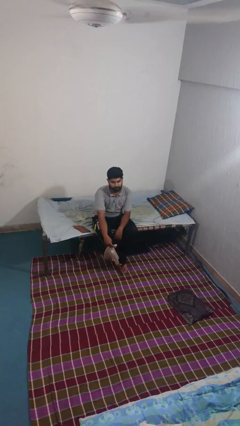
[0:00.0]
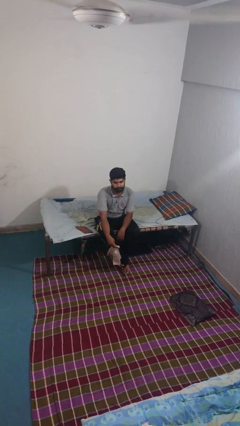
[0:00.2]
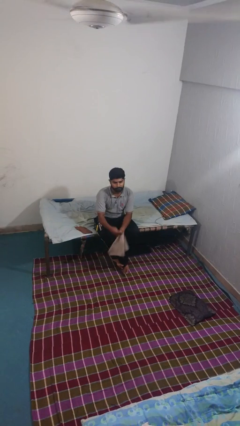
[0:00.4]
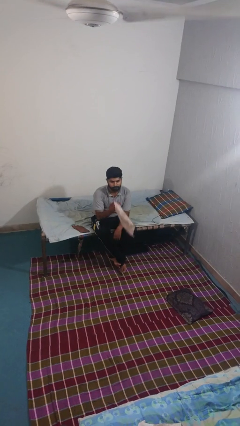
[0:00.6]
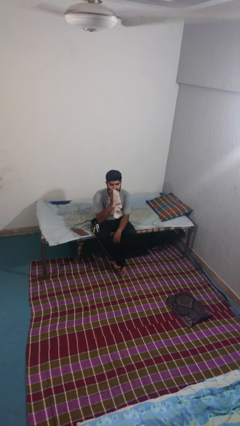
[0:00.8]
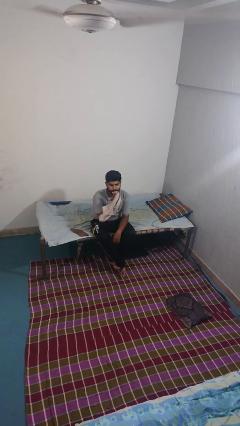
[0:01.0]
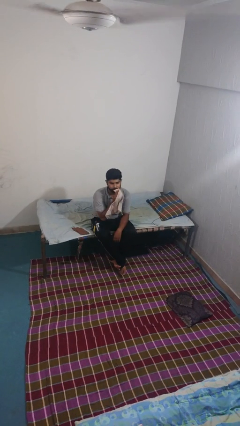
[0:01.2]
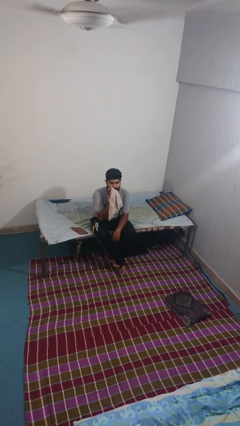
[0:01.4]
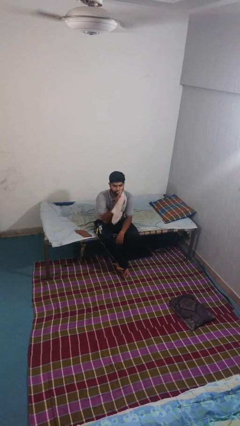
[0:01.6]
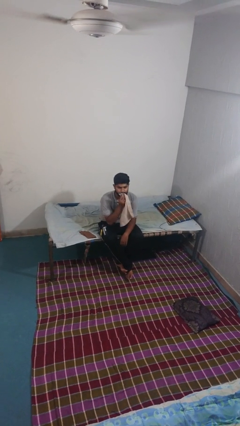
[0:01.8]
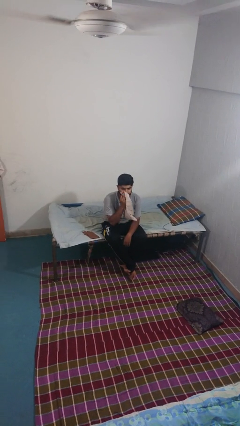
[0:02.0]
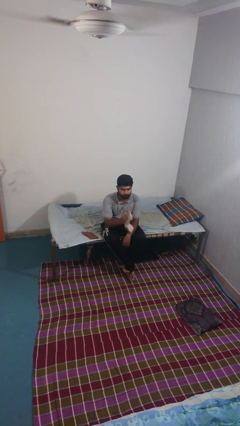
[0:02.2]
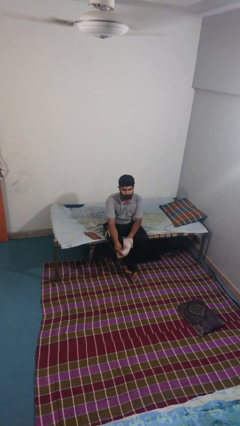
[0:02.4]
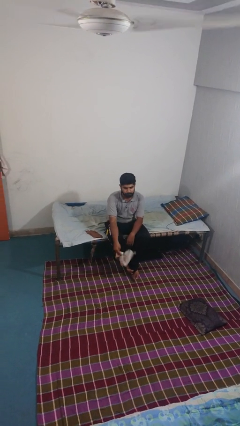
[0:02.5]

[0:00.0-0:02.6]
person wipes mouth with napkin

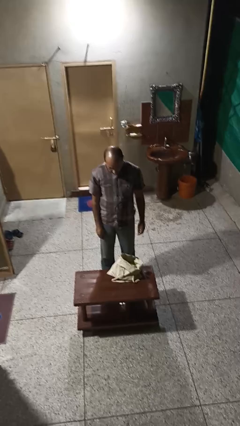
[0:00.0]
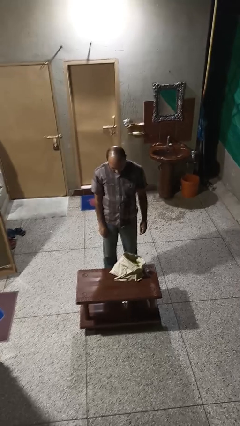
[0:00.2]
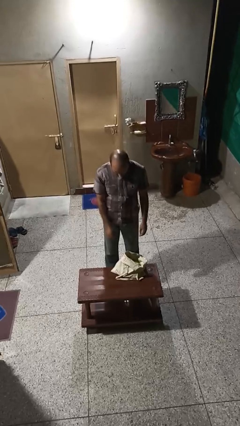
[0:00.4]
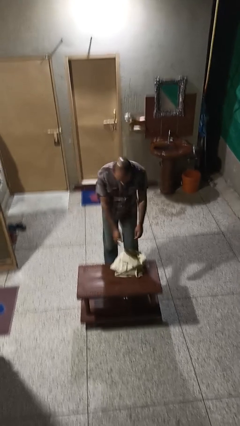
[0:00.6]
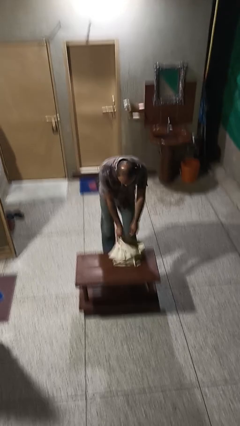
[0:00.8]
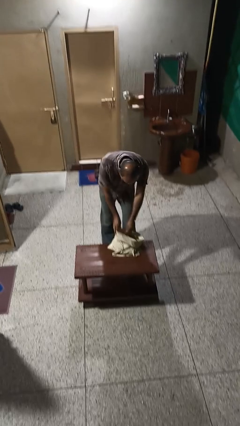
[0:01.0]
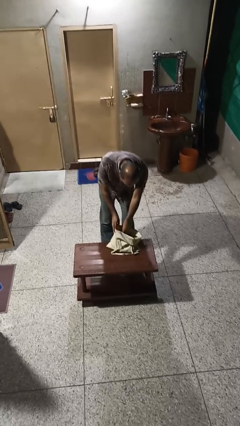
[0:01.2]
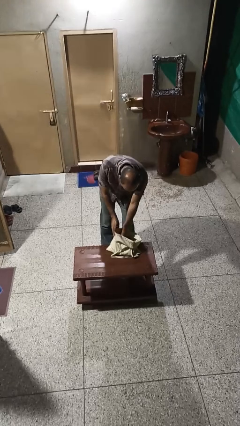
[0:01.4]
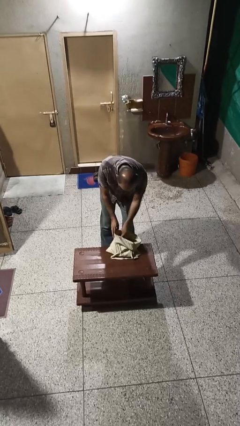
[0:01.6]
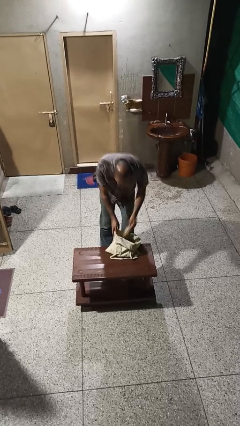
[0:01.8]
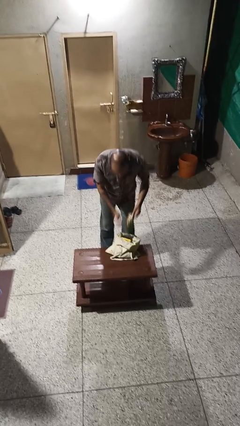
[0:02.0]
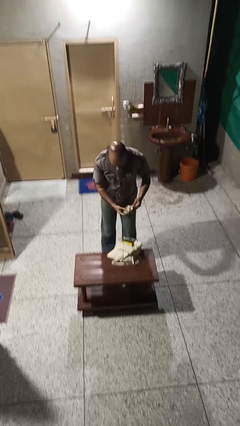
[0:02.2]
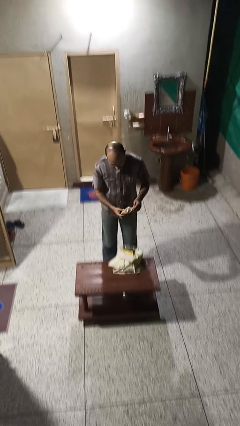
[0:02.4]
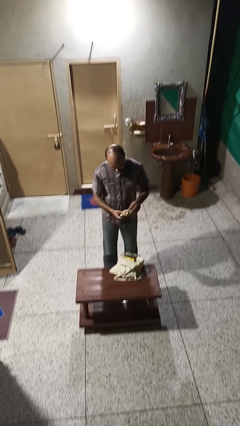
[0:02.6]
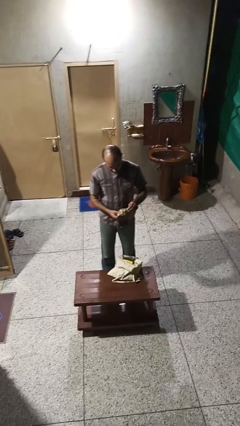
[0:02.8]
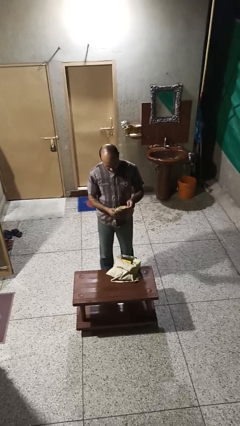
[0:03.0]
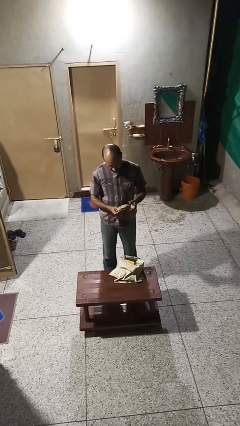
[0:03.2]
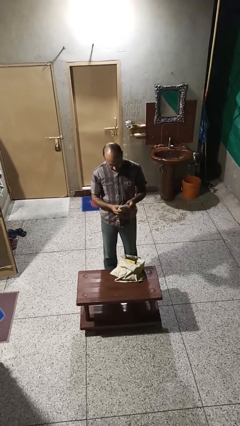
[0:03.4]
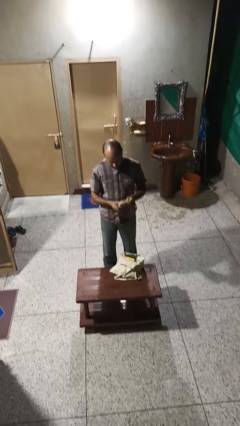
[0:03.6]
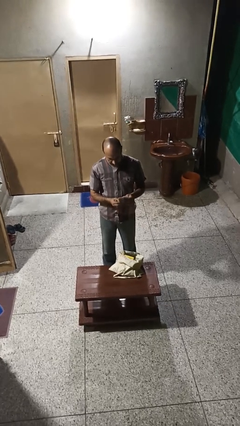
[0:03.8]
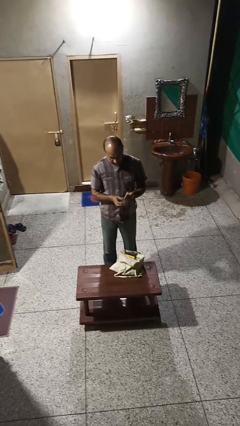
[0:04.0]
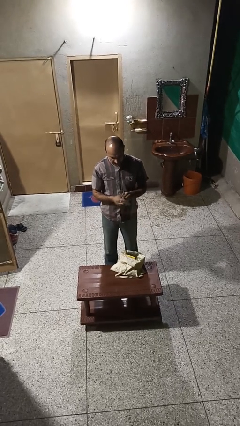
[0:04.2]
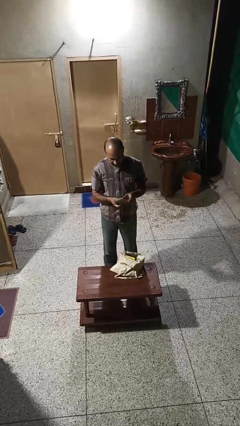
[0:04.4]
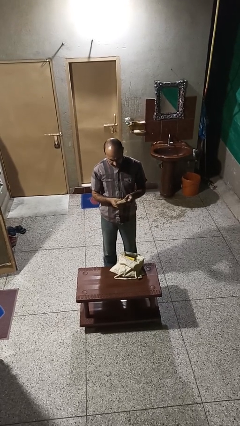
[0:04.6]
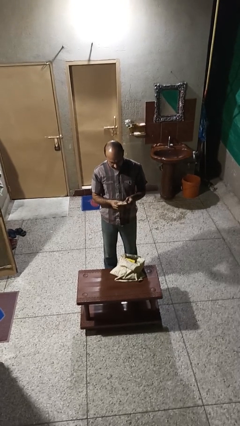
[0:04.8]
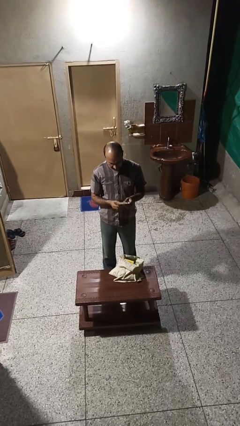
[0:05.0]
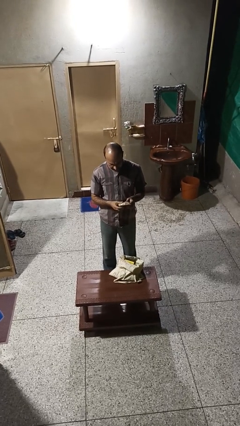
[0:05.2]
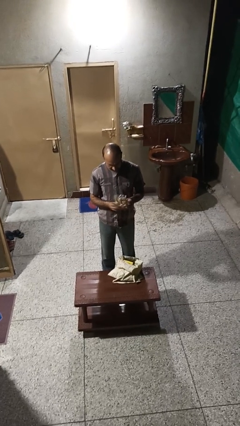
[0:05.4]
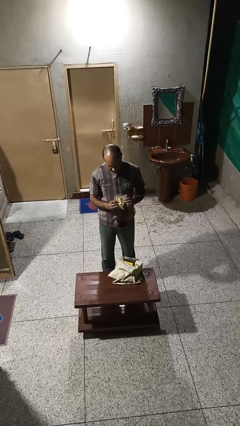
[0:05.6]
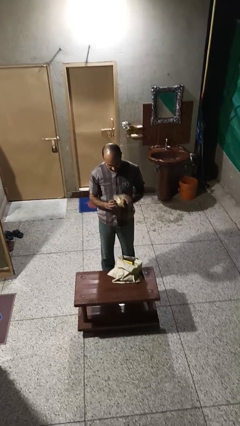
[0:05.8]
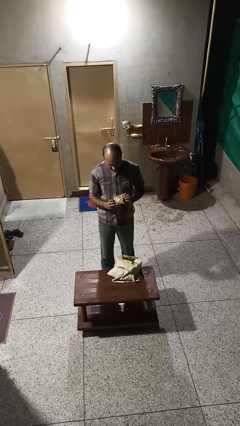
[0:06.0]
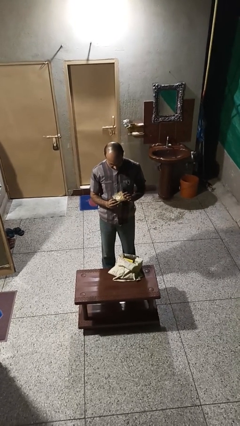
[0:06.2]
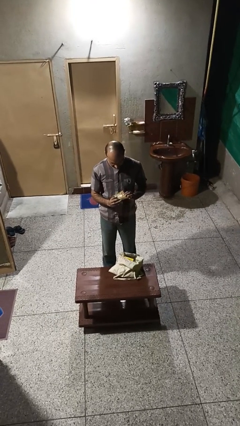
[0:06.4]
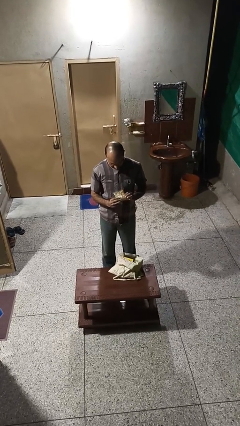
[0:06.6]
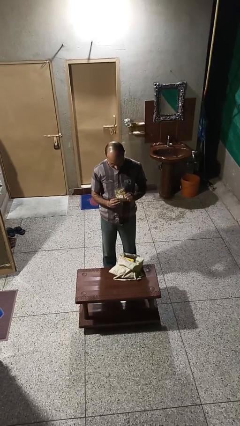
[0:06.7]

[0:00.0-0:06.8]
person takes object from bag

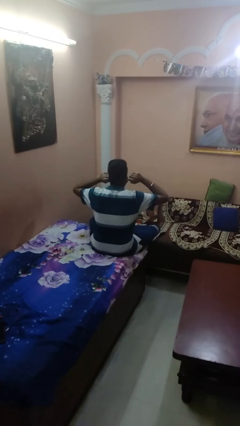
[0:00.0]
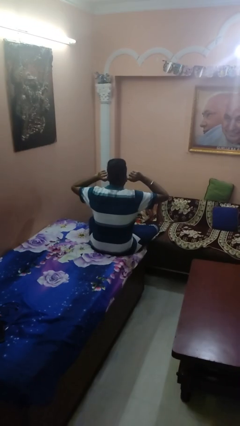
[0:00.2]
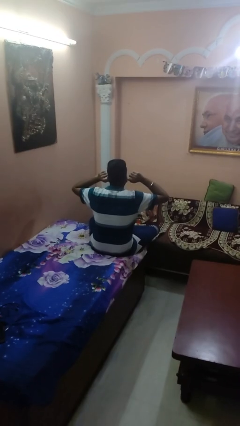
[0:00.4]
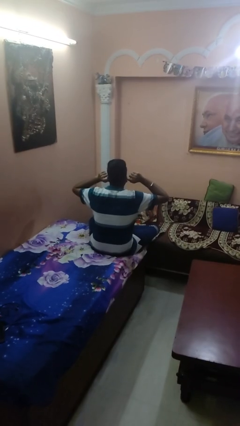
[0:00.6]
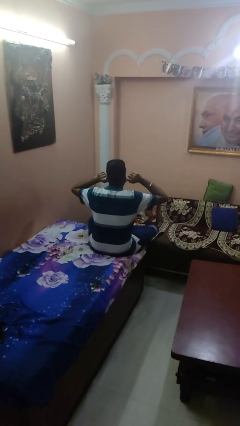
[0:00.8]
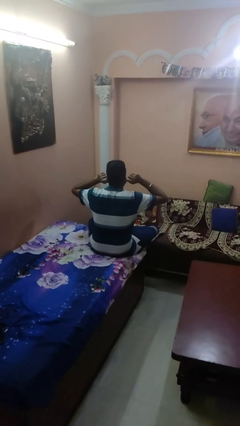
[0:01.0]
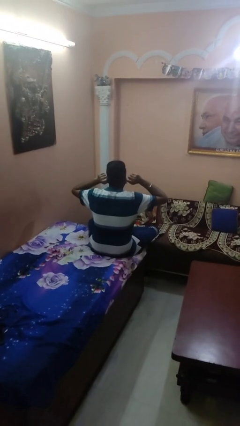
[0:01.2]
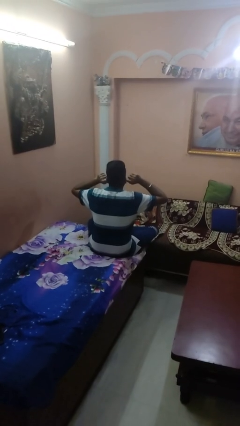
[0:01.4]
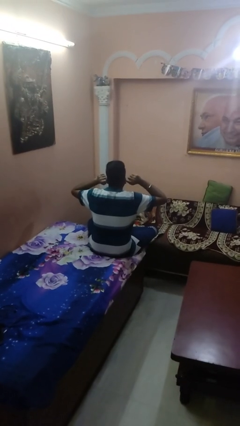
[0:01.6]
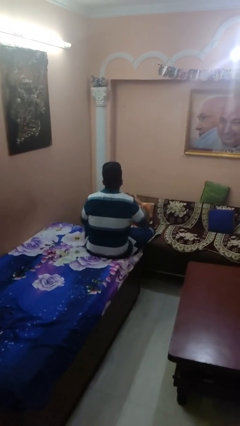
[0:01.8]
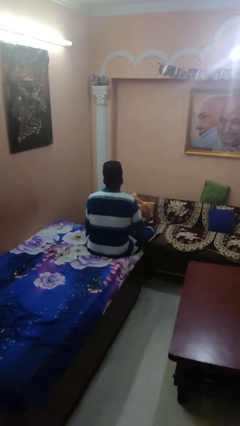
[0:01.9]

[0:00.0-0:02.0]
person puts fingers in ear

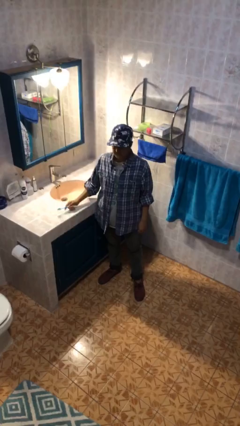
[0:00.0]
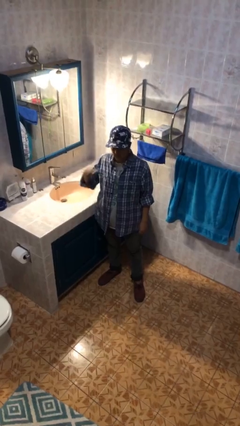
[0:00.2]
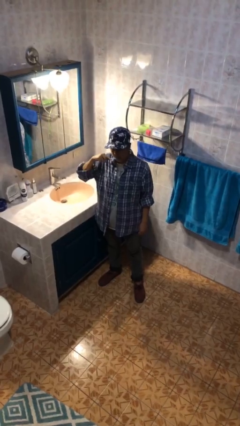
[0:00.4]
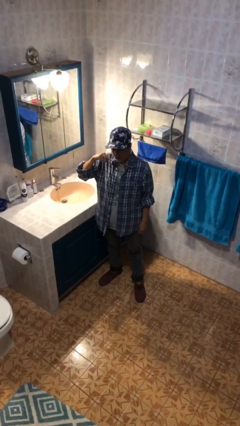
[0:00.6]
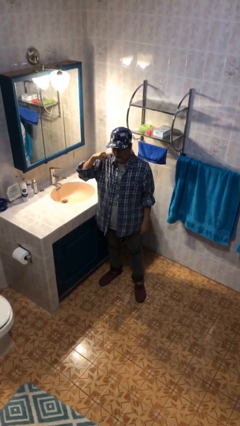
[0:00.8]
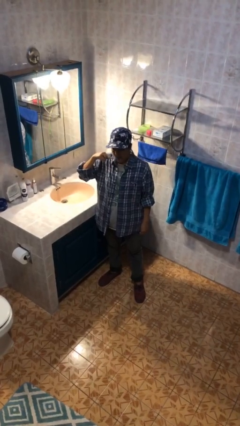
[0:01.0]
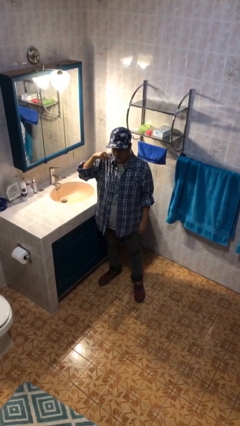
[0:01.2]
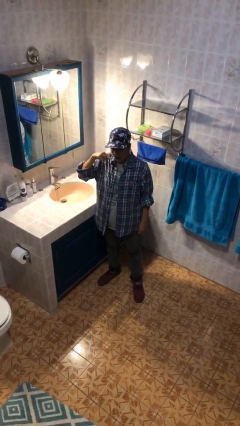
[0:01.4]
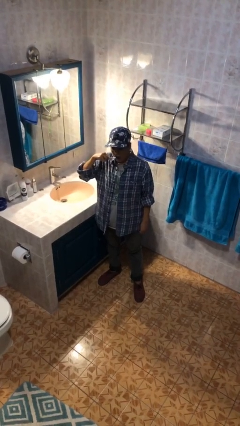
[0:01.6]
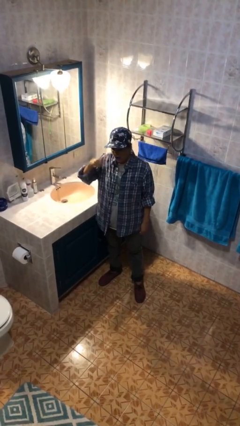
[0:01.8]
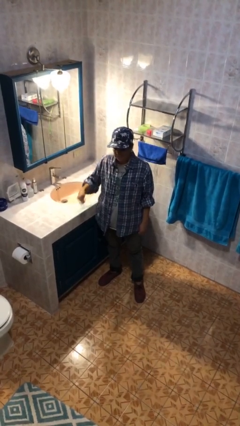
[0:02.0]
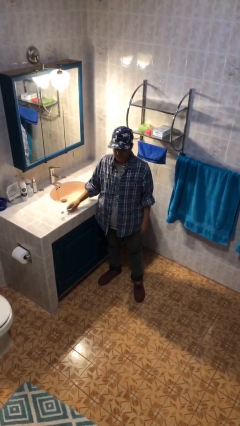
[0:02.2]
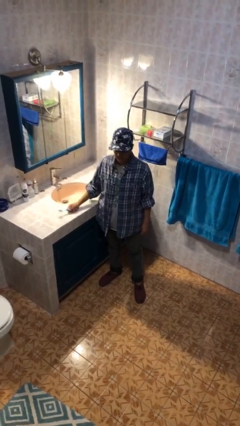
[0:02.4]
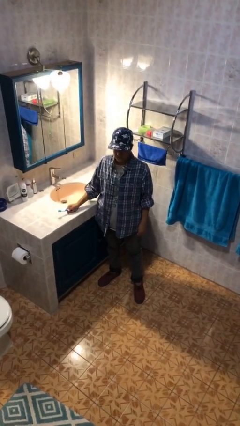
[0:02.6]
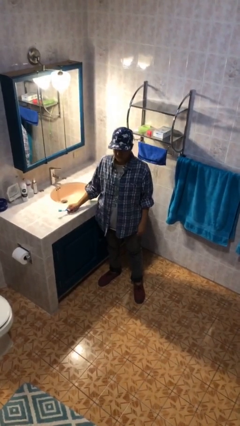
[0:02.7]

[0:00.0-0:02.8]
person brushes teeth

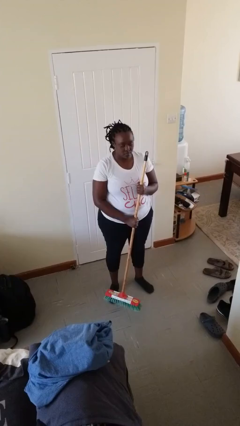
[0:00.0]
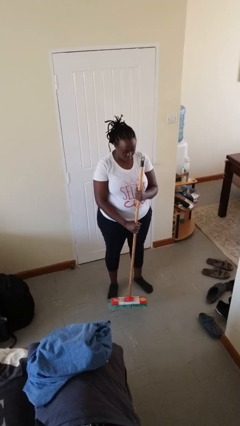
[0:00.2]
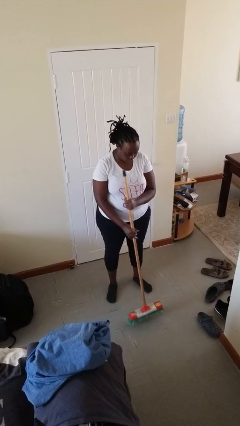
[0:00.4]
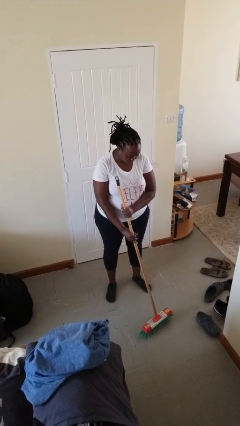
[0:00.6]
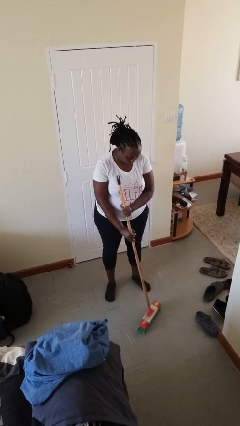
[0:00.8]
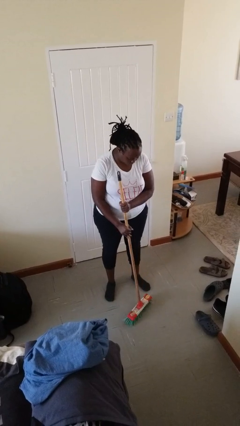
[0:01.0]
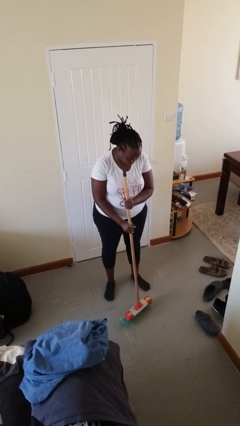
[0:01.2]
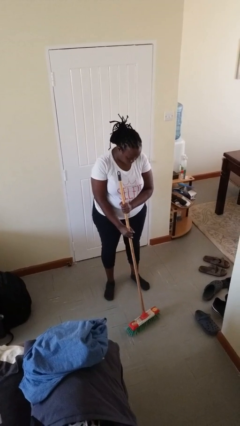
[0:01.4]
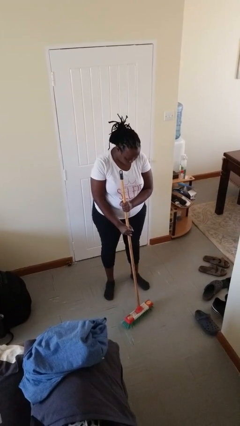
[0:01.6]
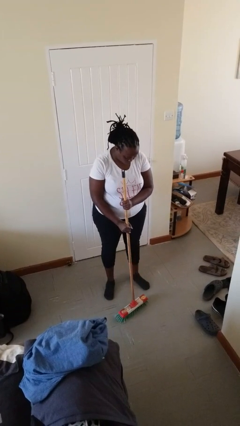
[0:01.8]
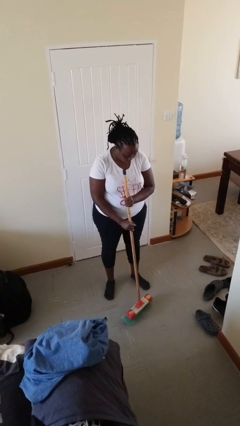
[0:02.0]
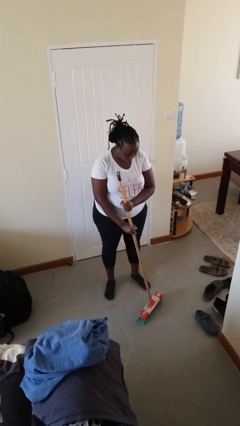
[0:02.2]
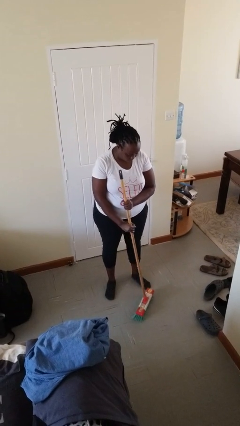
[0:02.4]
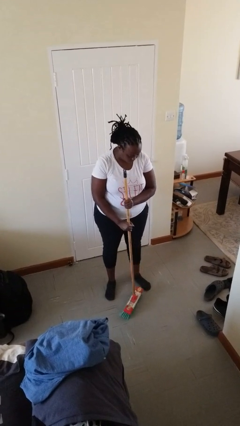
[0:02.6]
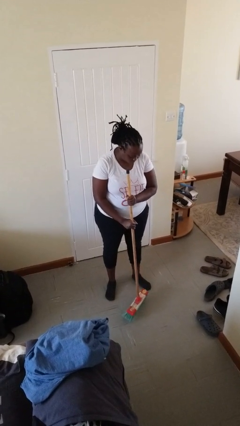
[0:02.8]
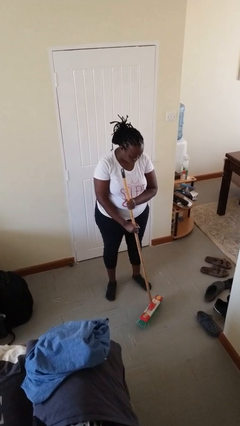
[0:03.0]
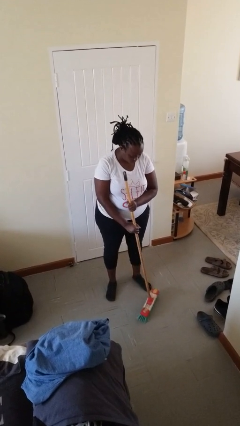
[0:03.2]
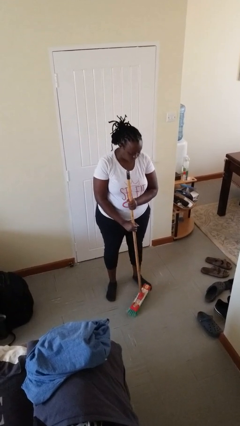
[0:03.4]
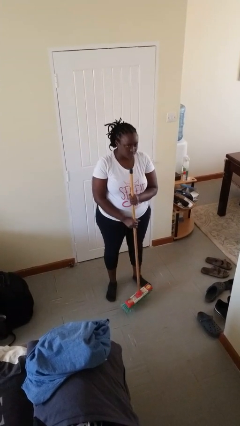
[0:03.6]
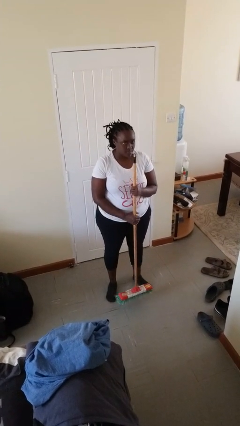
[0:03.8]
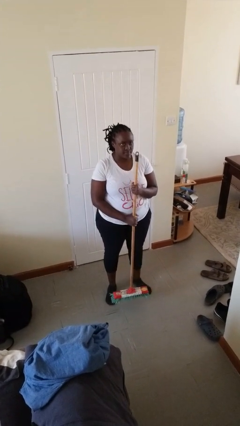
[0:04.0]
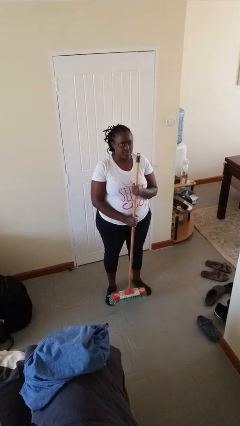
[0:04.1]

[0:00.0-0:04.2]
person sweeps floor
